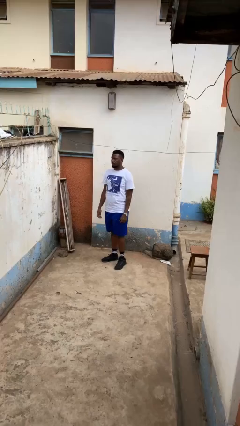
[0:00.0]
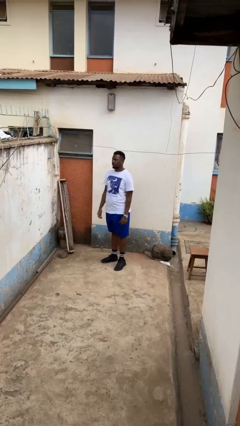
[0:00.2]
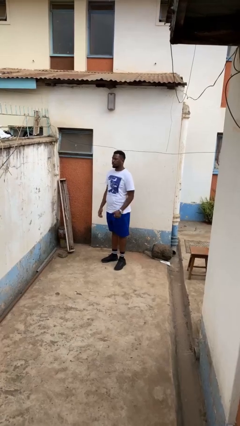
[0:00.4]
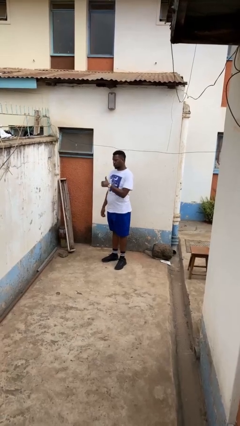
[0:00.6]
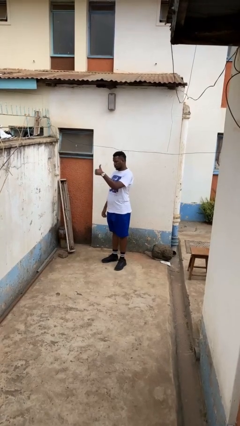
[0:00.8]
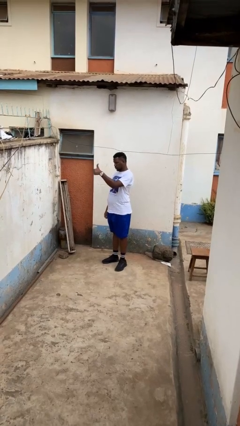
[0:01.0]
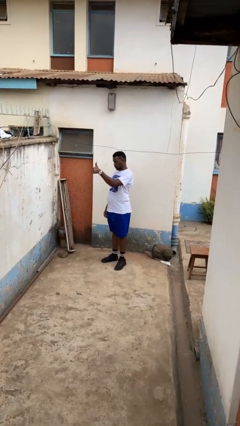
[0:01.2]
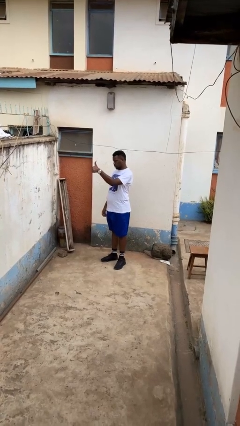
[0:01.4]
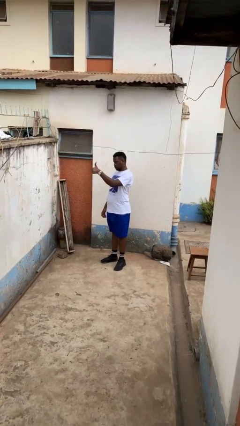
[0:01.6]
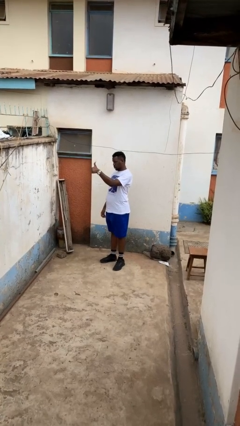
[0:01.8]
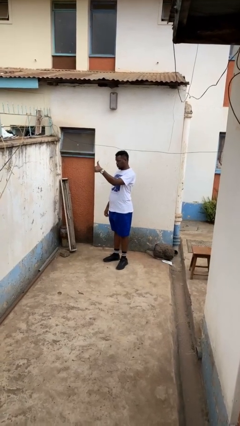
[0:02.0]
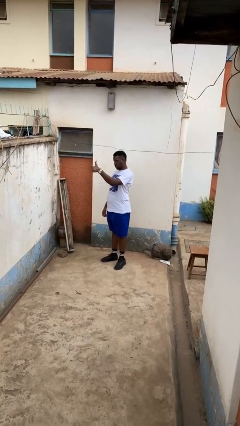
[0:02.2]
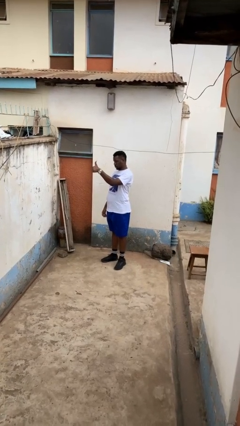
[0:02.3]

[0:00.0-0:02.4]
person gestures thumbs up

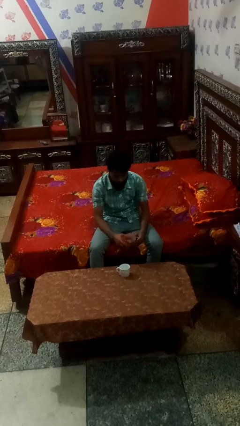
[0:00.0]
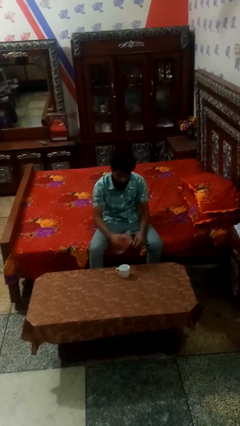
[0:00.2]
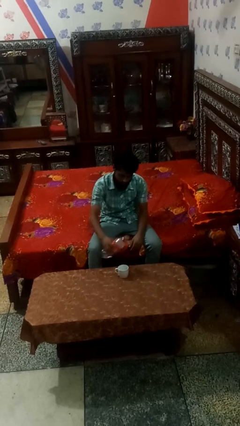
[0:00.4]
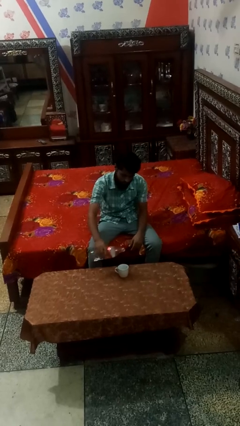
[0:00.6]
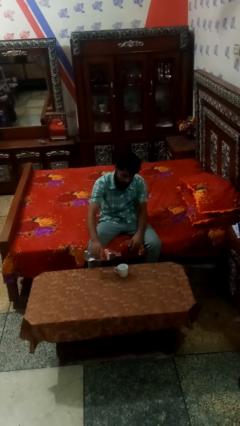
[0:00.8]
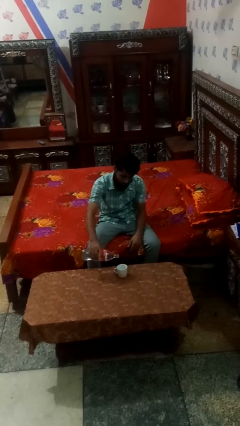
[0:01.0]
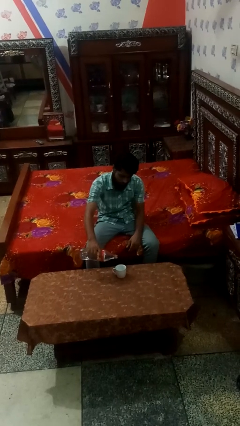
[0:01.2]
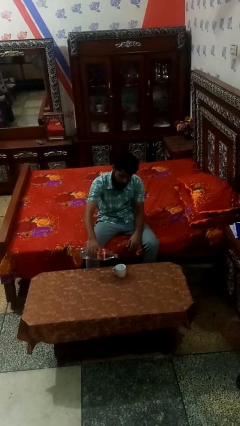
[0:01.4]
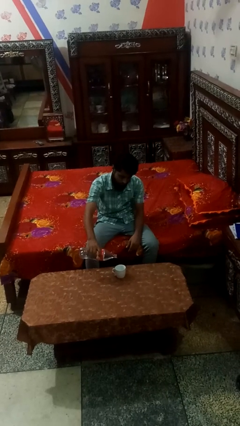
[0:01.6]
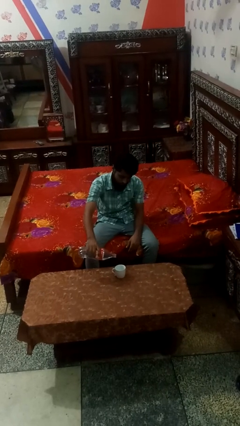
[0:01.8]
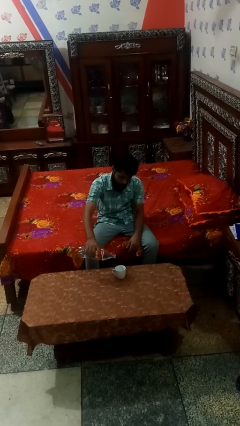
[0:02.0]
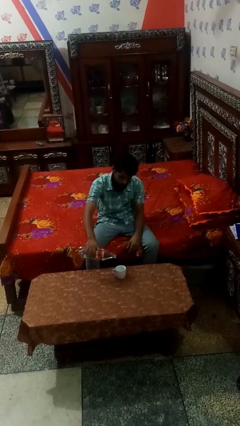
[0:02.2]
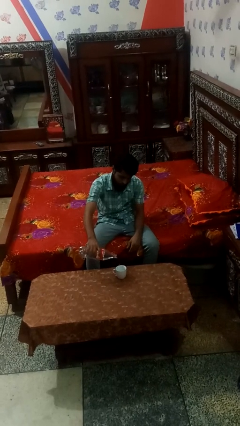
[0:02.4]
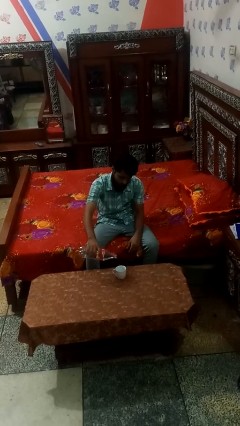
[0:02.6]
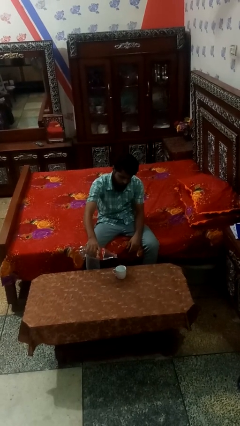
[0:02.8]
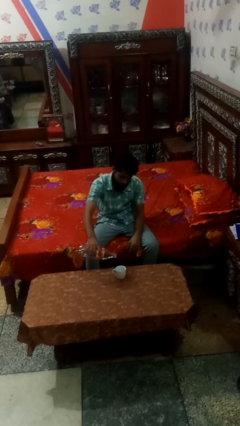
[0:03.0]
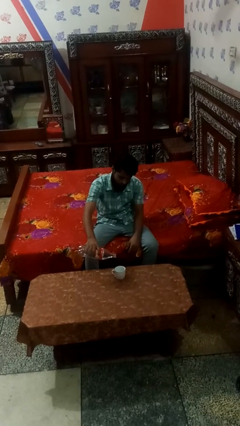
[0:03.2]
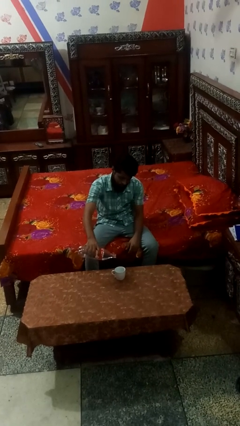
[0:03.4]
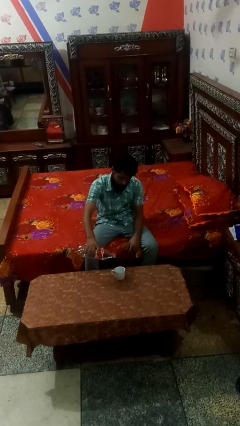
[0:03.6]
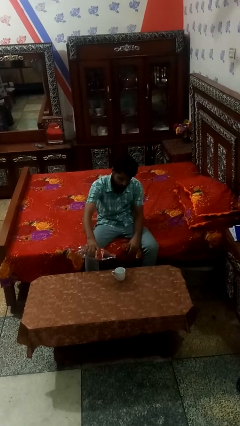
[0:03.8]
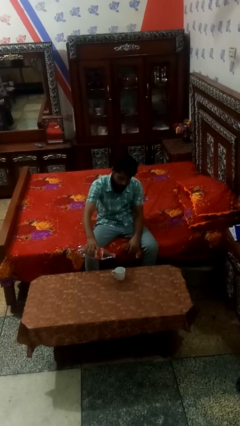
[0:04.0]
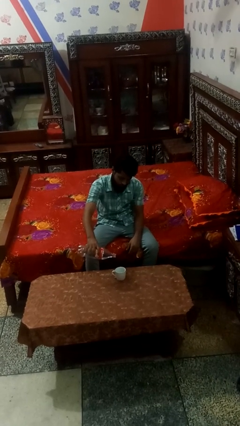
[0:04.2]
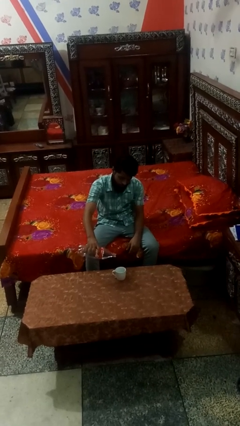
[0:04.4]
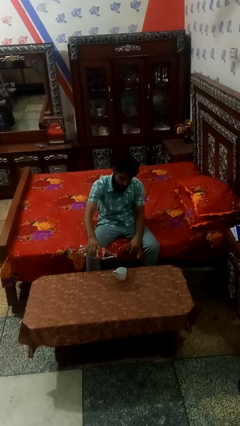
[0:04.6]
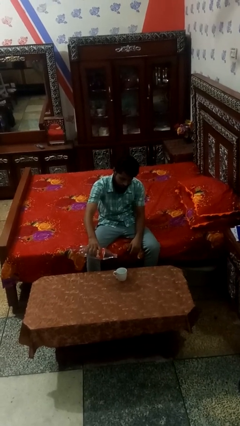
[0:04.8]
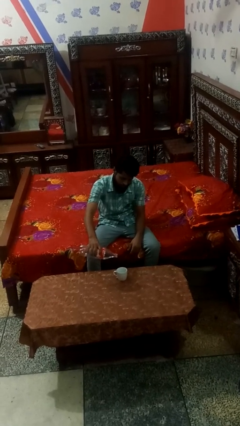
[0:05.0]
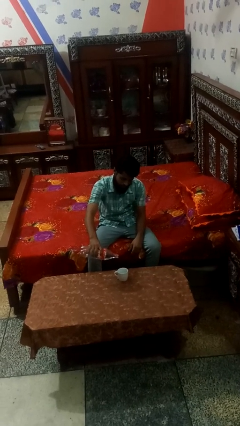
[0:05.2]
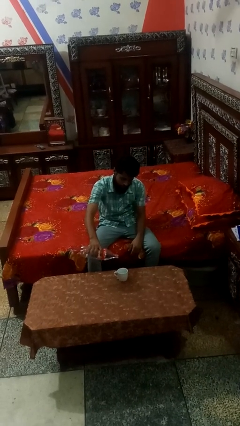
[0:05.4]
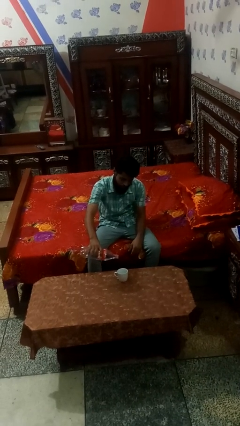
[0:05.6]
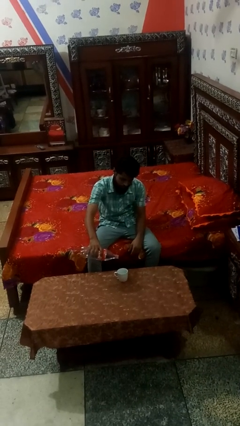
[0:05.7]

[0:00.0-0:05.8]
person pours liquid into cup

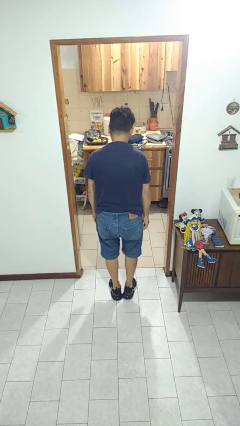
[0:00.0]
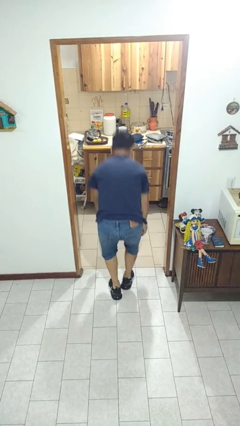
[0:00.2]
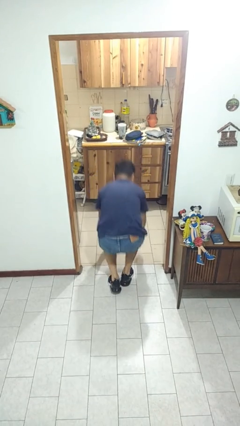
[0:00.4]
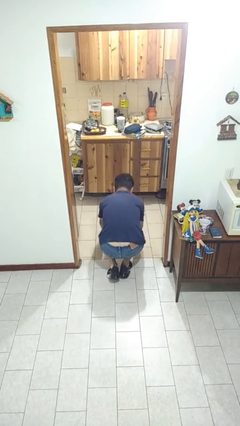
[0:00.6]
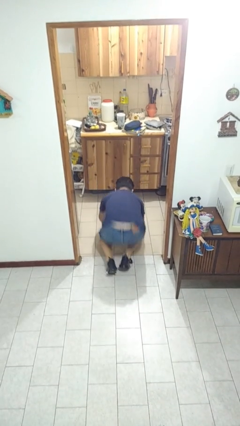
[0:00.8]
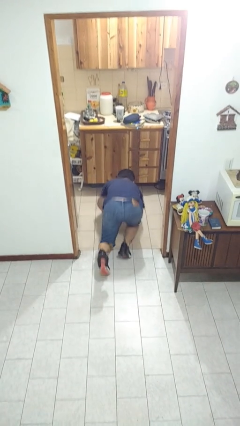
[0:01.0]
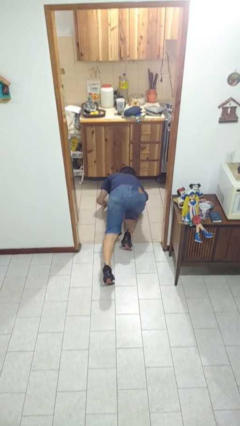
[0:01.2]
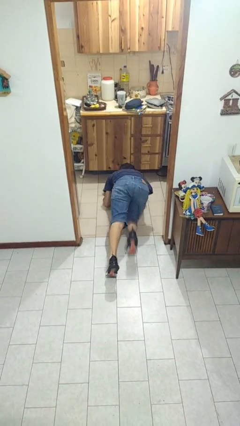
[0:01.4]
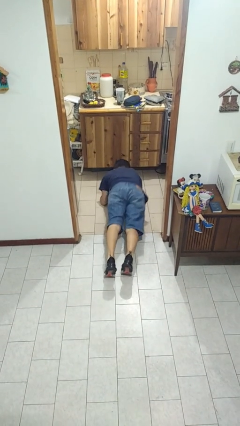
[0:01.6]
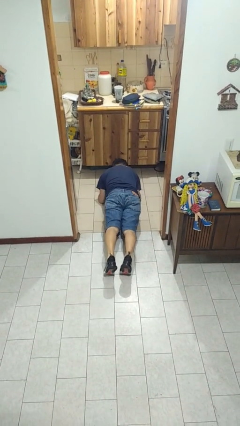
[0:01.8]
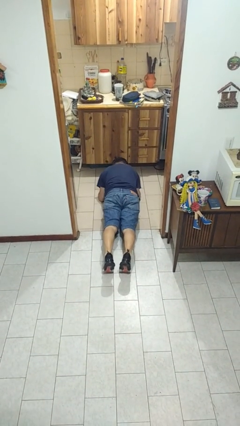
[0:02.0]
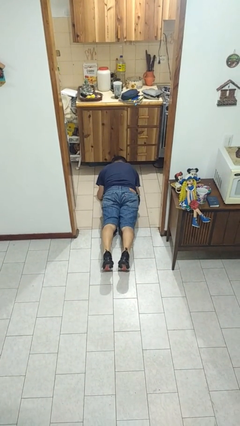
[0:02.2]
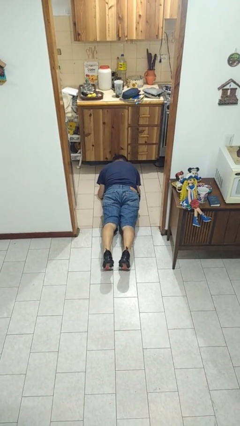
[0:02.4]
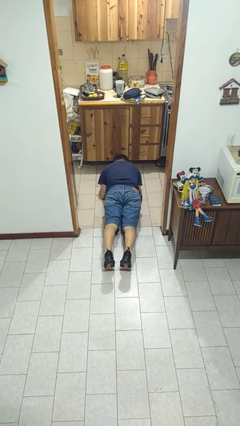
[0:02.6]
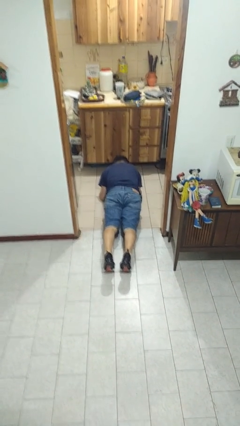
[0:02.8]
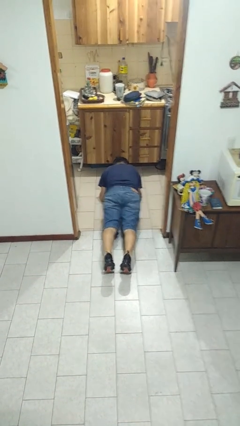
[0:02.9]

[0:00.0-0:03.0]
person exercises with plank

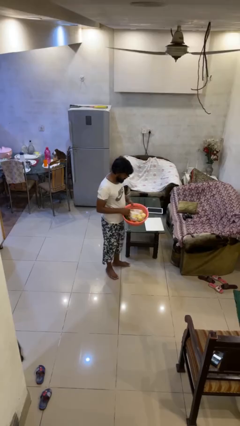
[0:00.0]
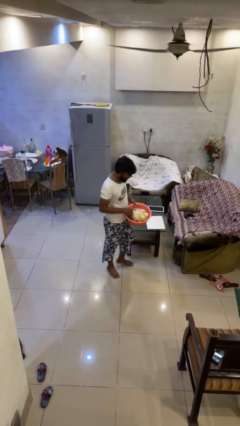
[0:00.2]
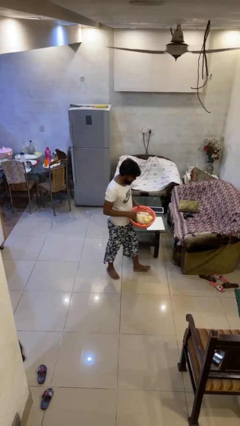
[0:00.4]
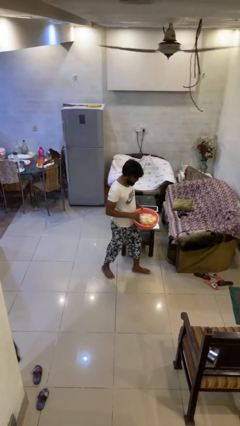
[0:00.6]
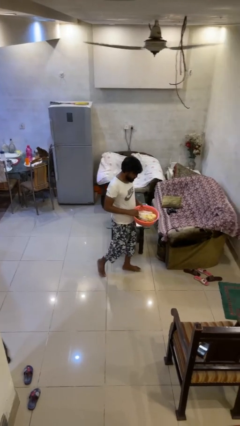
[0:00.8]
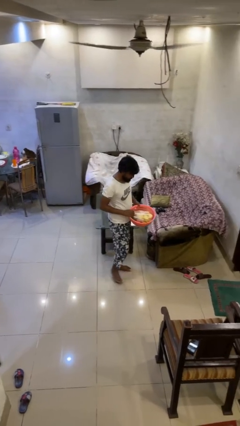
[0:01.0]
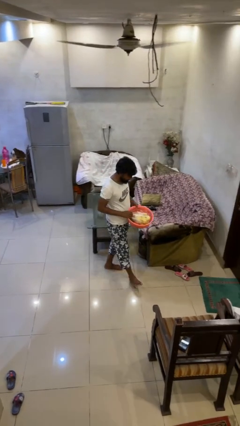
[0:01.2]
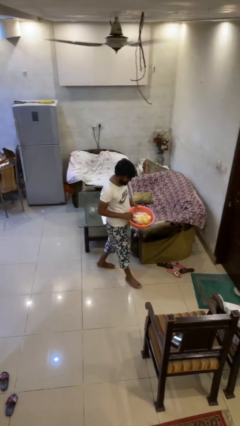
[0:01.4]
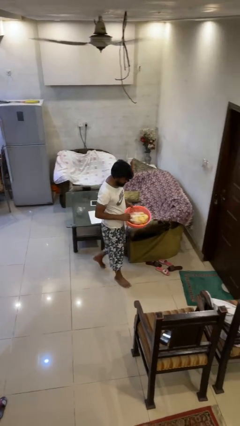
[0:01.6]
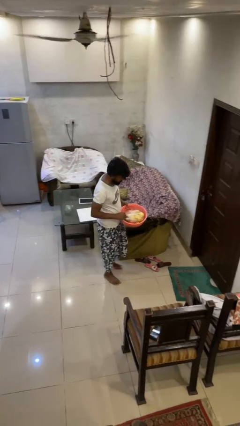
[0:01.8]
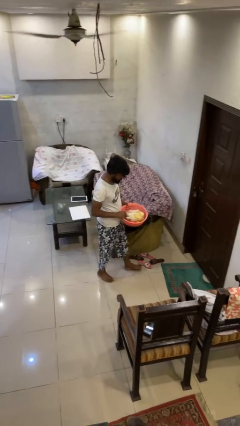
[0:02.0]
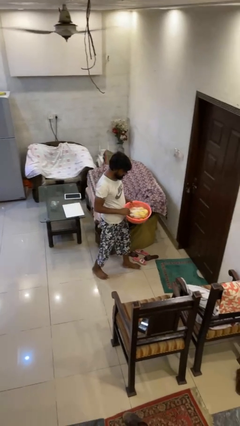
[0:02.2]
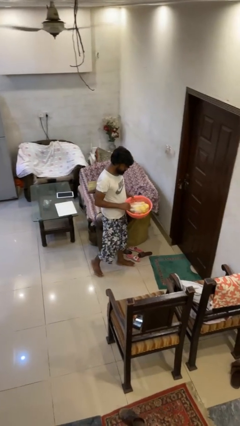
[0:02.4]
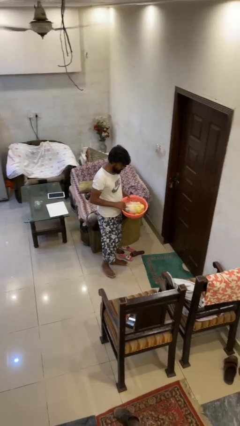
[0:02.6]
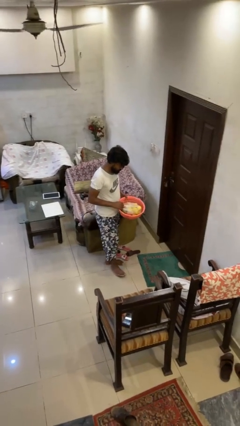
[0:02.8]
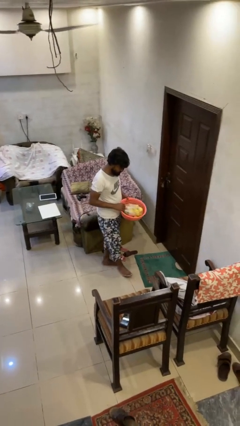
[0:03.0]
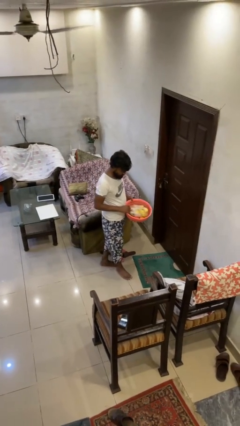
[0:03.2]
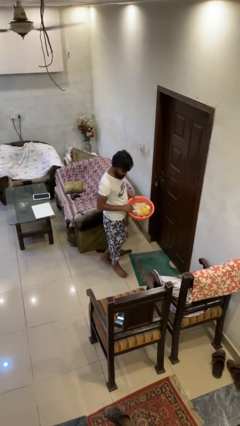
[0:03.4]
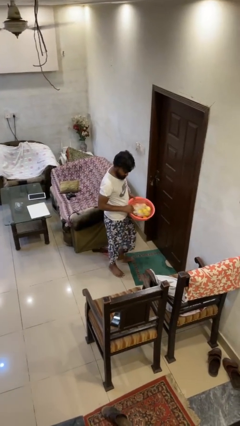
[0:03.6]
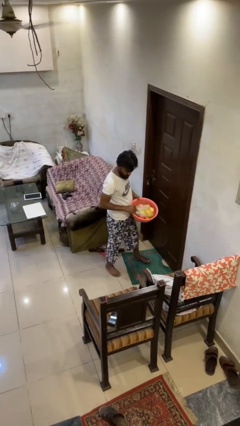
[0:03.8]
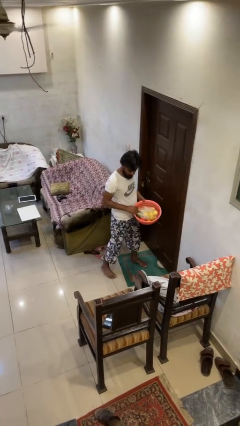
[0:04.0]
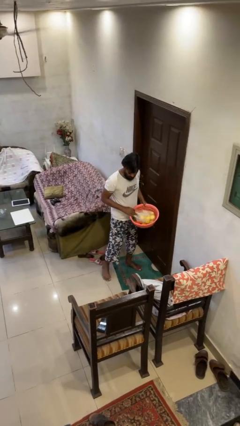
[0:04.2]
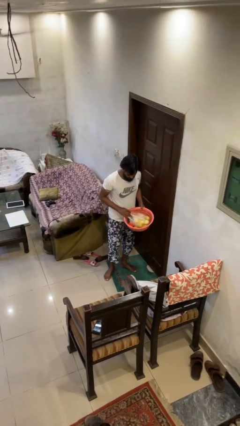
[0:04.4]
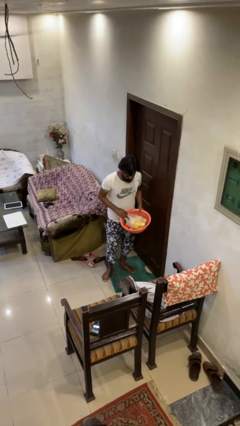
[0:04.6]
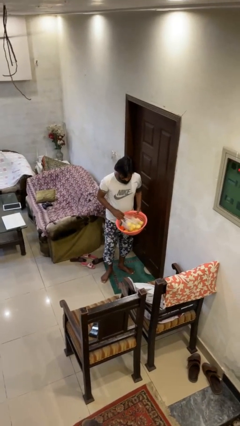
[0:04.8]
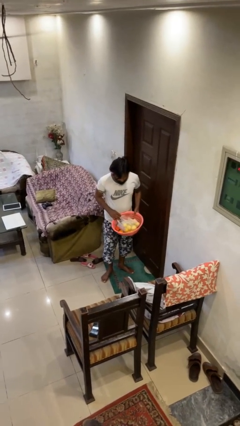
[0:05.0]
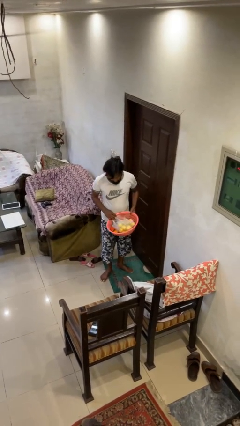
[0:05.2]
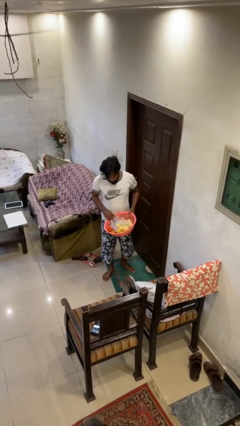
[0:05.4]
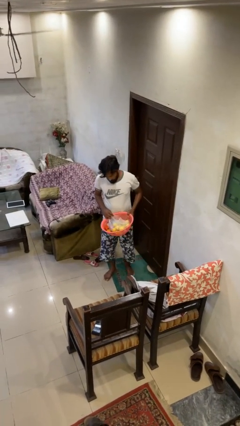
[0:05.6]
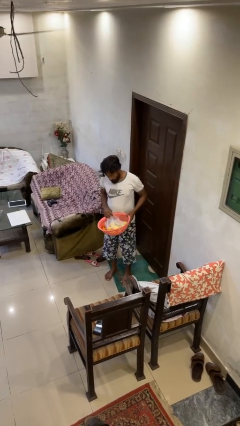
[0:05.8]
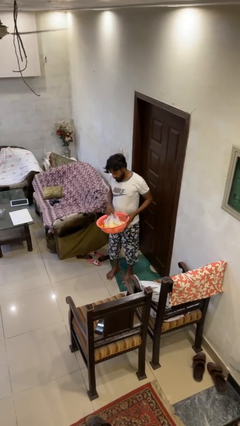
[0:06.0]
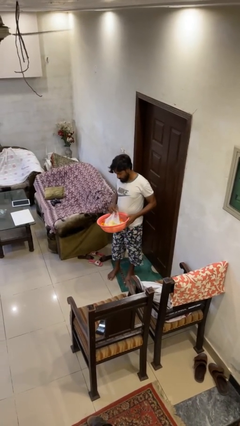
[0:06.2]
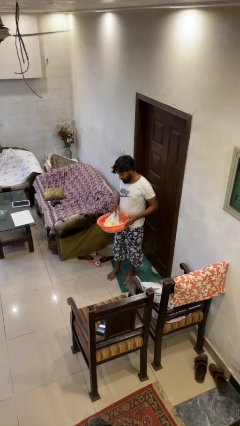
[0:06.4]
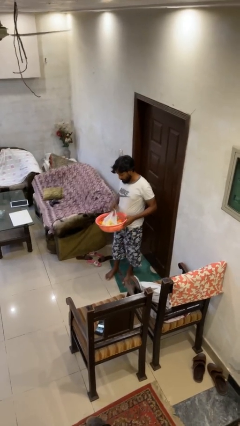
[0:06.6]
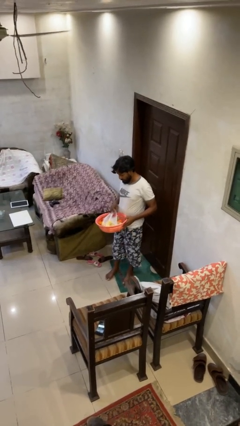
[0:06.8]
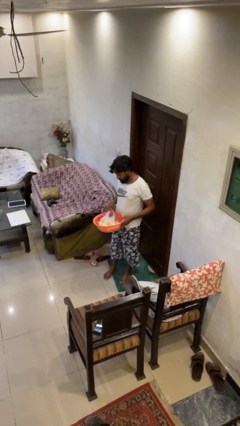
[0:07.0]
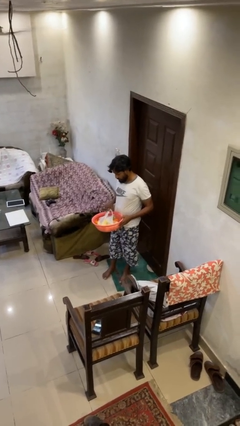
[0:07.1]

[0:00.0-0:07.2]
person carries groceries
